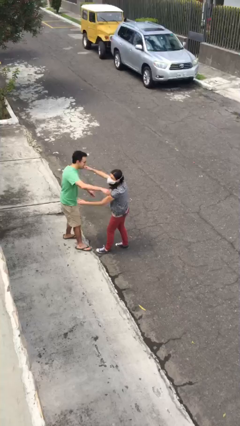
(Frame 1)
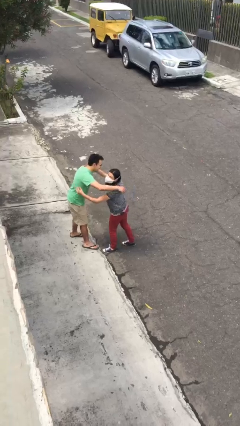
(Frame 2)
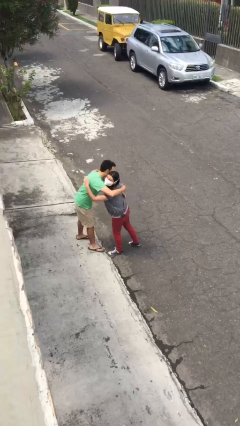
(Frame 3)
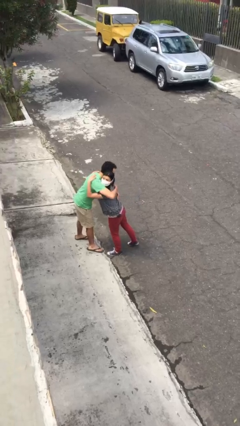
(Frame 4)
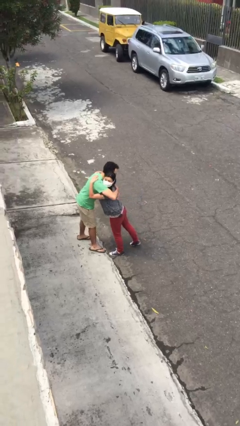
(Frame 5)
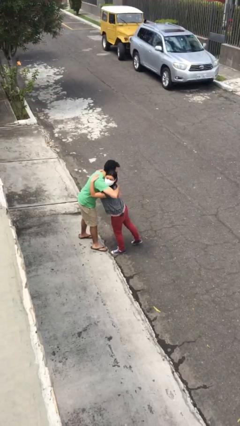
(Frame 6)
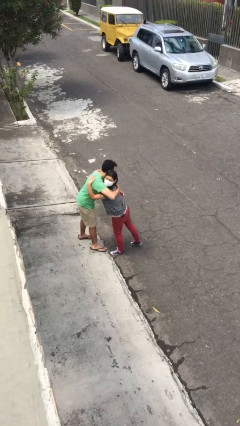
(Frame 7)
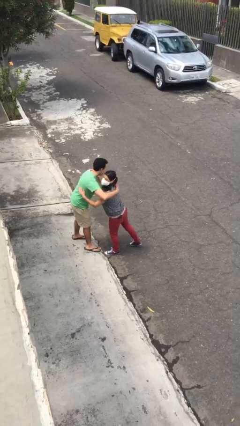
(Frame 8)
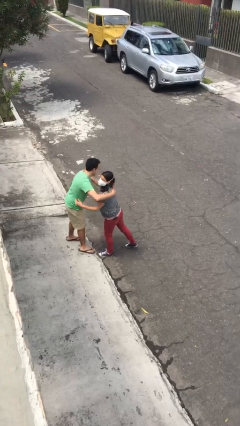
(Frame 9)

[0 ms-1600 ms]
person embraces person

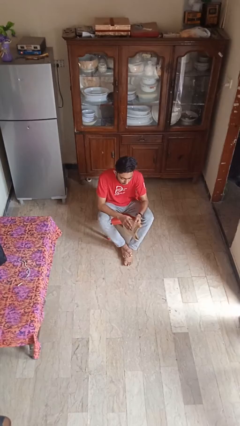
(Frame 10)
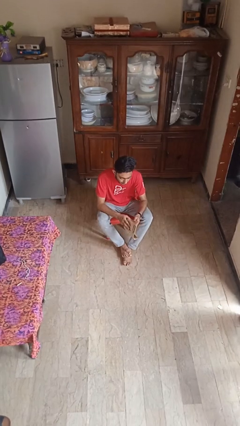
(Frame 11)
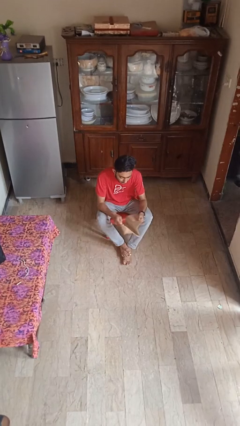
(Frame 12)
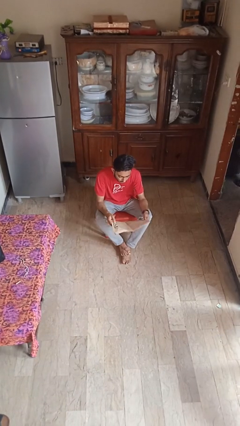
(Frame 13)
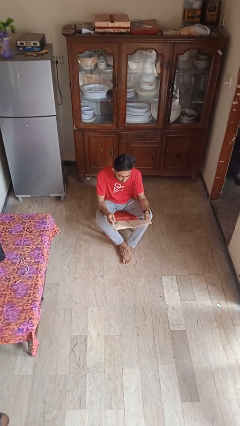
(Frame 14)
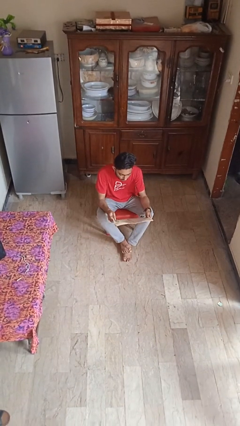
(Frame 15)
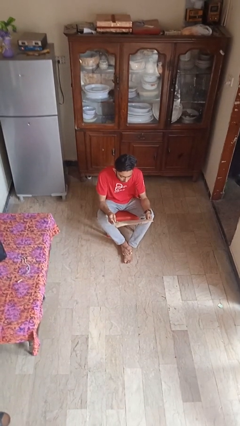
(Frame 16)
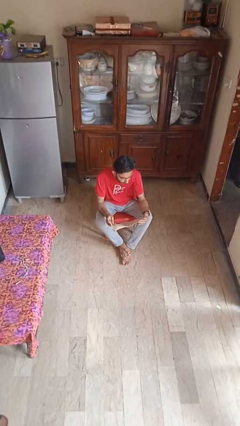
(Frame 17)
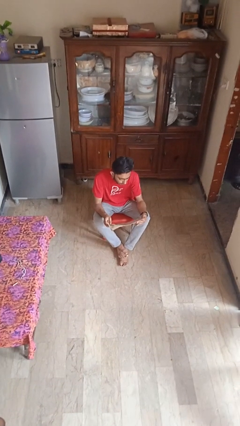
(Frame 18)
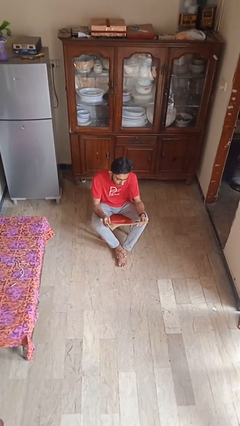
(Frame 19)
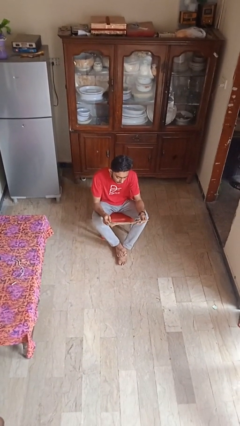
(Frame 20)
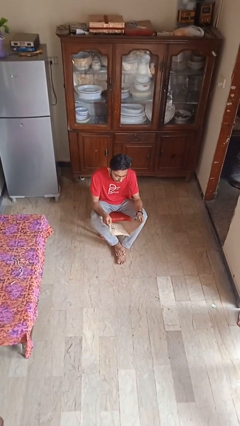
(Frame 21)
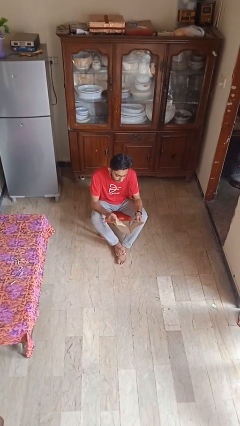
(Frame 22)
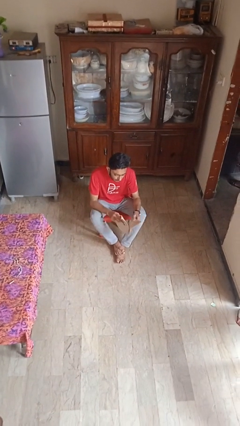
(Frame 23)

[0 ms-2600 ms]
person reads newspaper

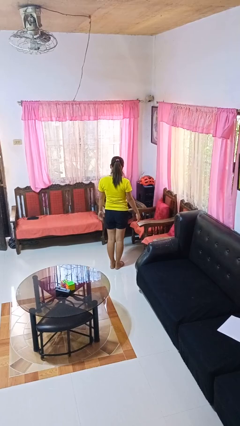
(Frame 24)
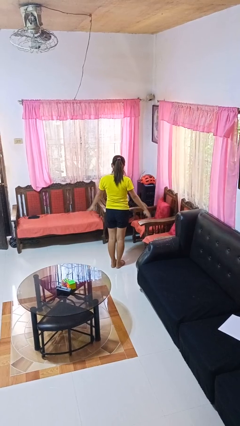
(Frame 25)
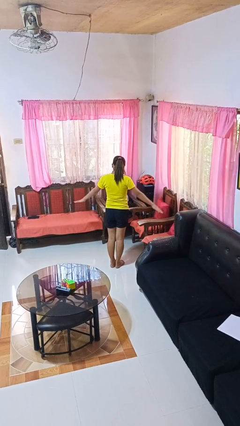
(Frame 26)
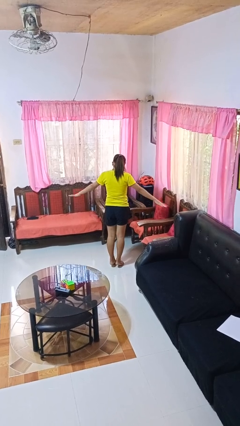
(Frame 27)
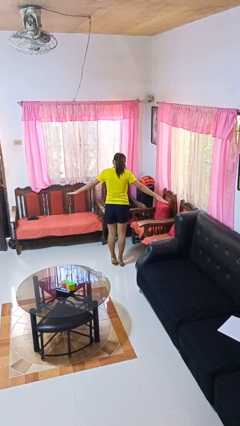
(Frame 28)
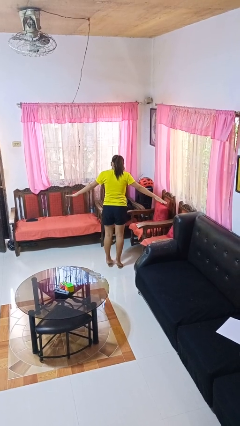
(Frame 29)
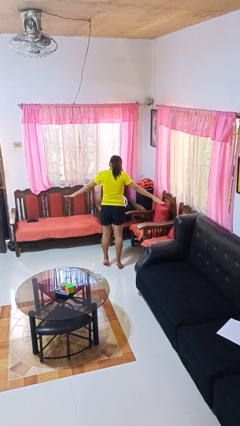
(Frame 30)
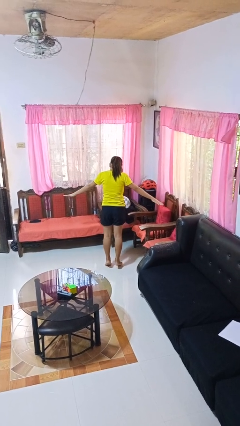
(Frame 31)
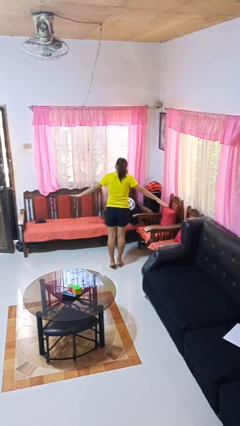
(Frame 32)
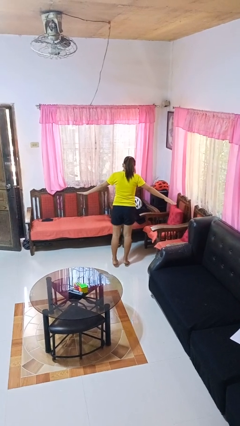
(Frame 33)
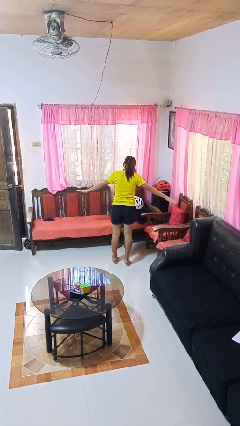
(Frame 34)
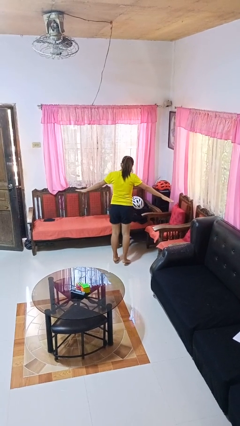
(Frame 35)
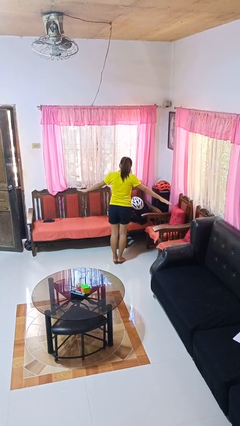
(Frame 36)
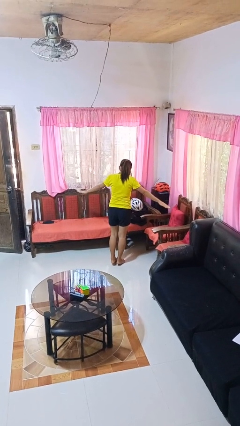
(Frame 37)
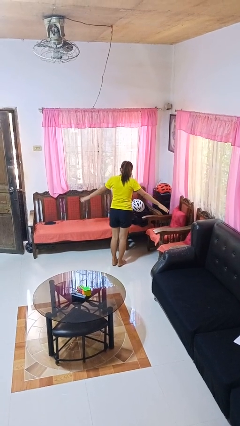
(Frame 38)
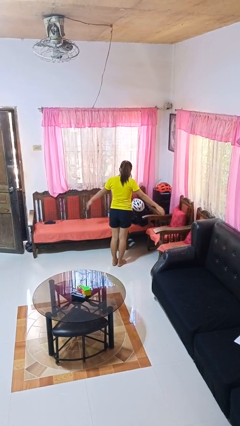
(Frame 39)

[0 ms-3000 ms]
person walks tiptoe

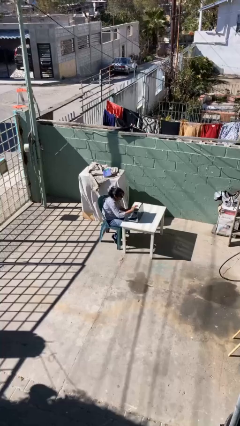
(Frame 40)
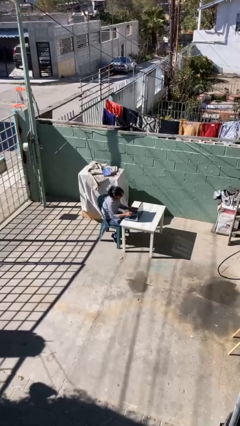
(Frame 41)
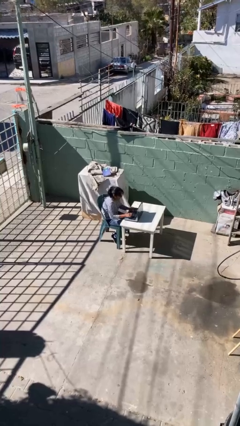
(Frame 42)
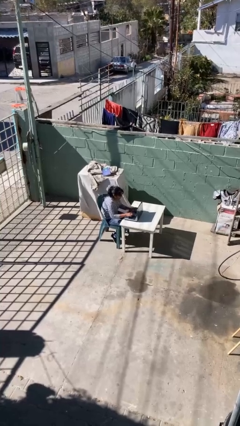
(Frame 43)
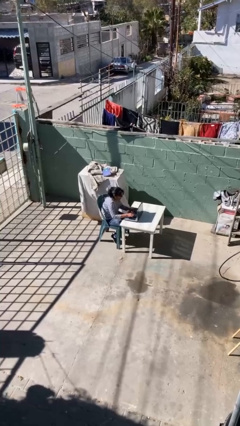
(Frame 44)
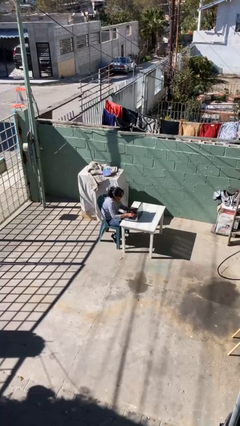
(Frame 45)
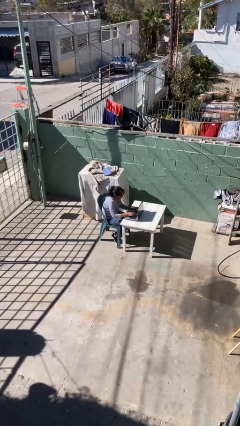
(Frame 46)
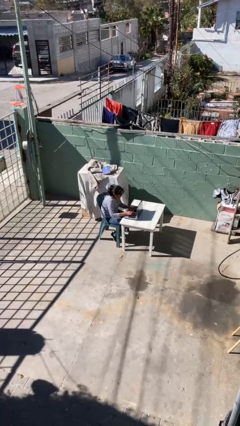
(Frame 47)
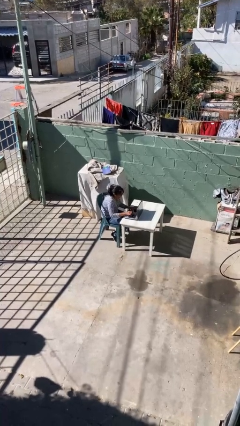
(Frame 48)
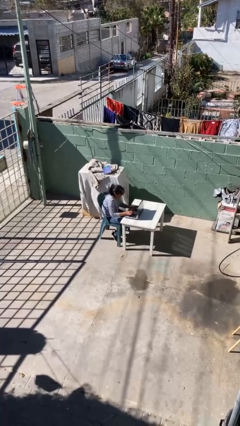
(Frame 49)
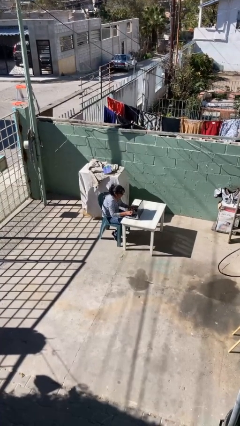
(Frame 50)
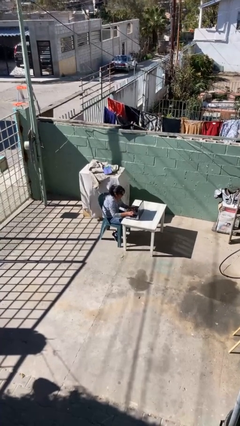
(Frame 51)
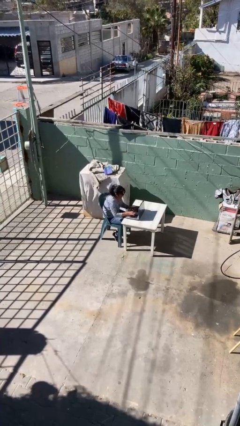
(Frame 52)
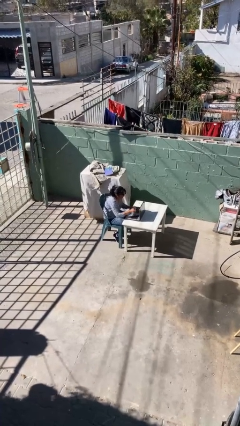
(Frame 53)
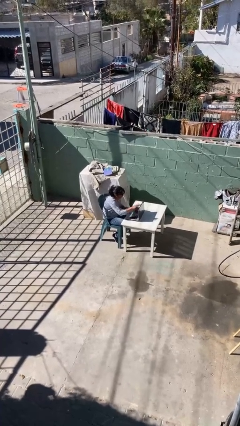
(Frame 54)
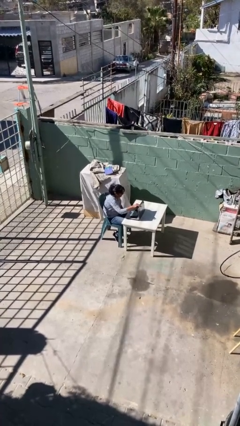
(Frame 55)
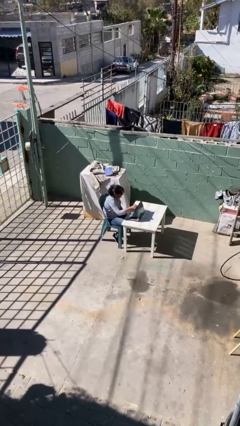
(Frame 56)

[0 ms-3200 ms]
person interacts with laptop

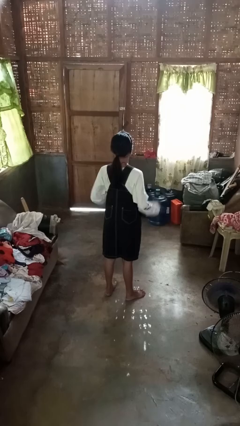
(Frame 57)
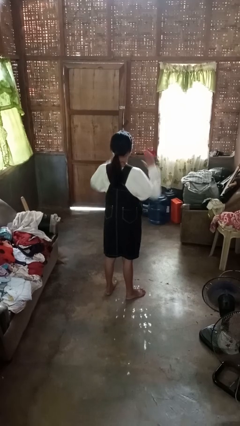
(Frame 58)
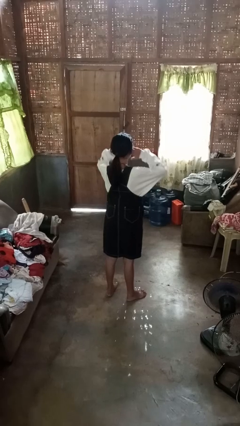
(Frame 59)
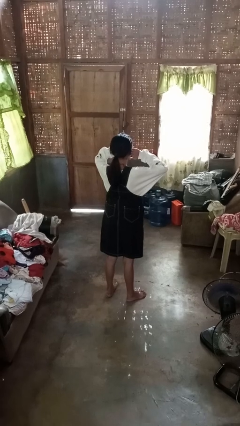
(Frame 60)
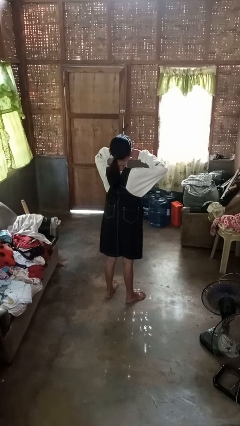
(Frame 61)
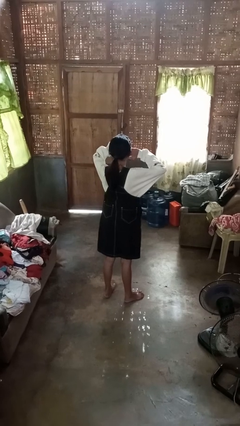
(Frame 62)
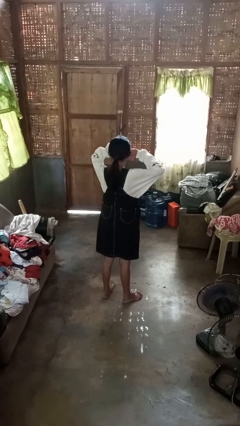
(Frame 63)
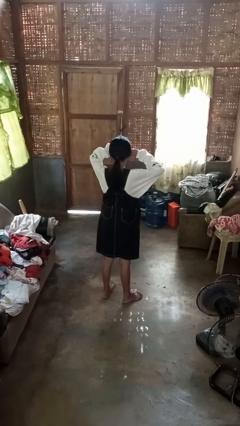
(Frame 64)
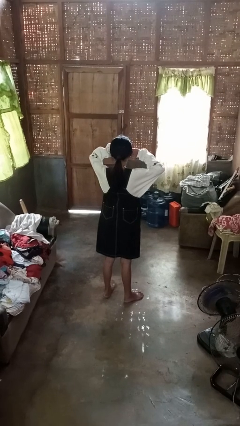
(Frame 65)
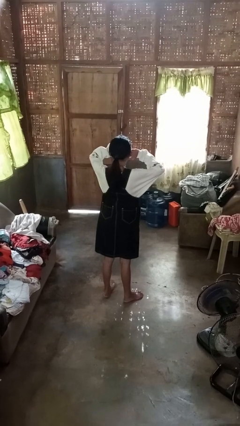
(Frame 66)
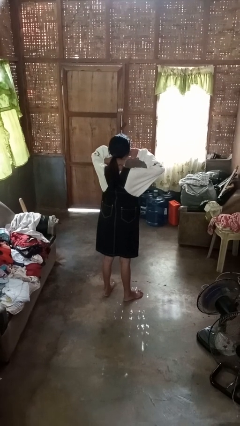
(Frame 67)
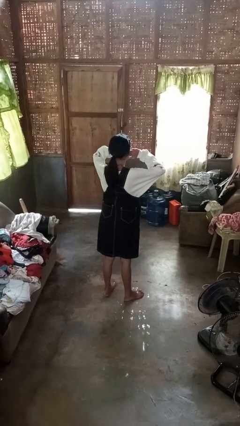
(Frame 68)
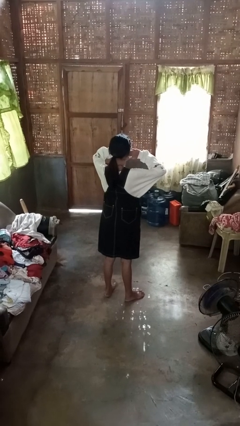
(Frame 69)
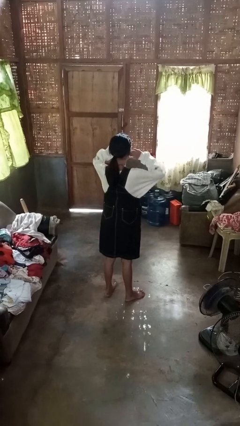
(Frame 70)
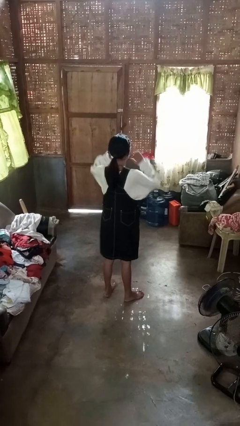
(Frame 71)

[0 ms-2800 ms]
person puts fingers in ear

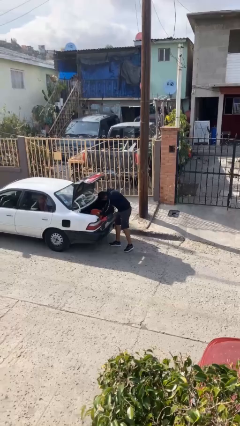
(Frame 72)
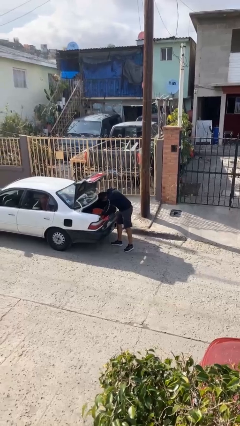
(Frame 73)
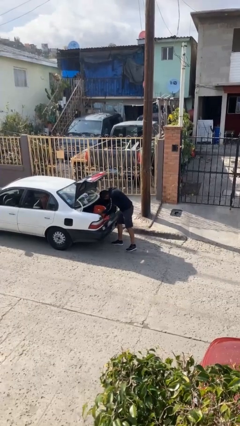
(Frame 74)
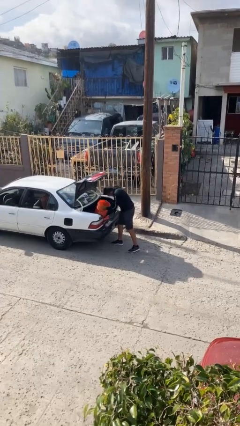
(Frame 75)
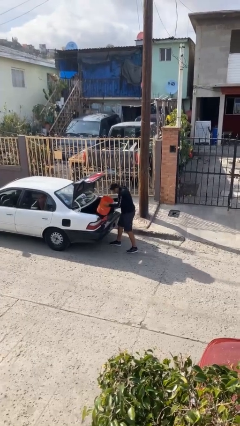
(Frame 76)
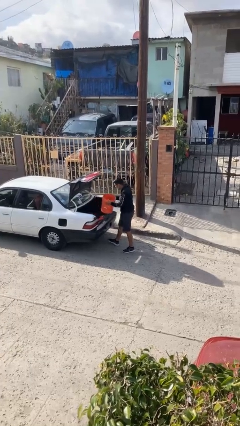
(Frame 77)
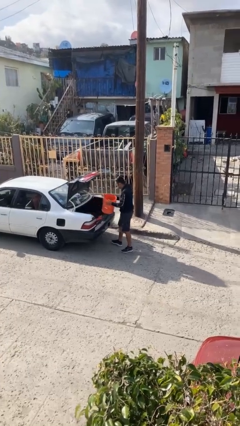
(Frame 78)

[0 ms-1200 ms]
person unloads car

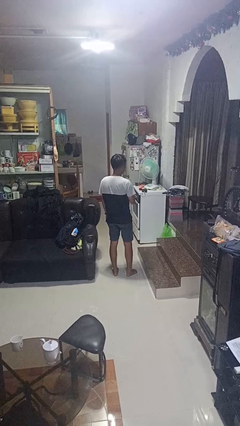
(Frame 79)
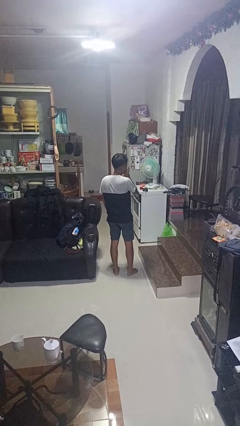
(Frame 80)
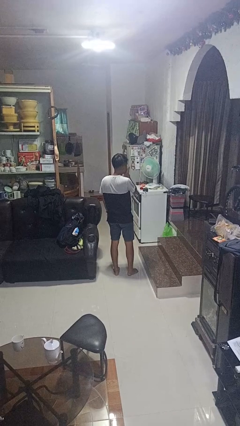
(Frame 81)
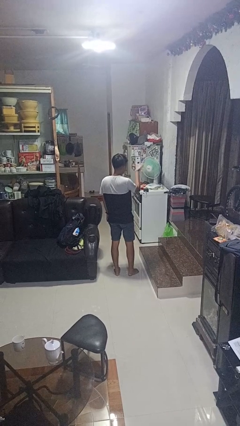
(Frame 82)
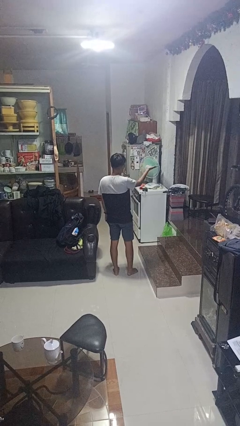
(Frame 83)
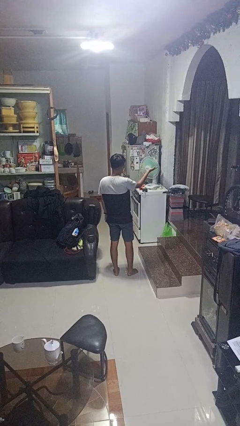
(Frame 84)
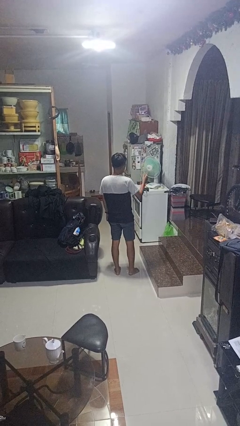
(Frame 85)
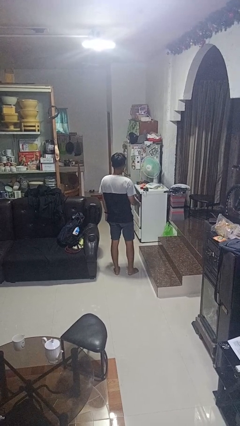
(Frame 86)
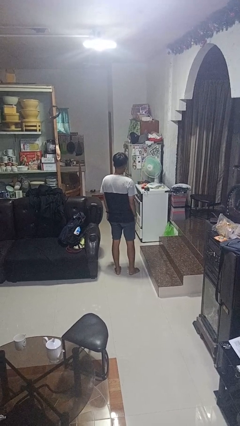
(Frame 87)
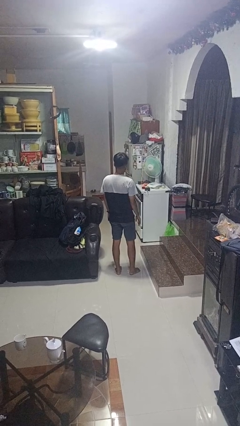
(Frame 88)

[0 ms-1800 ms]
person gestures blow kiss

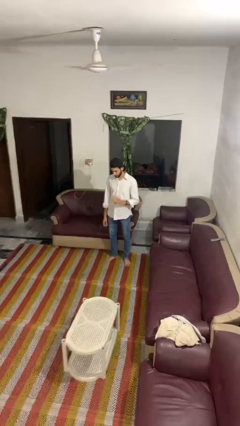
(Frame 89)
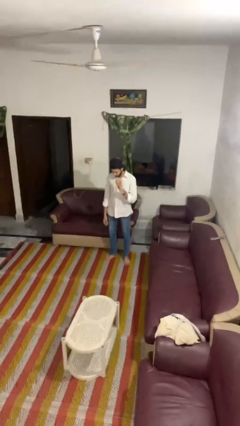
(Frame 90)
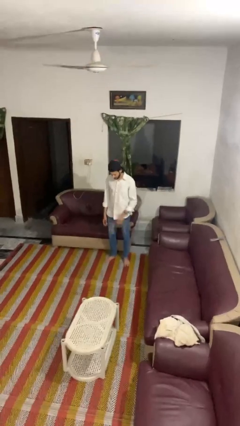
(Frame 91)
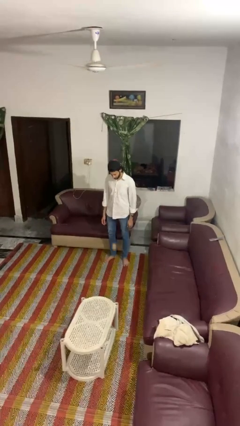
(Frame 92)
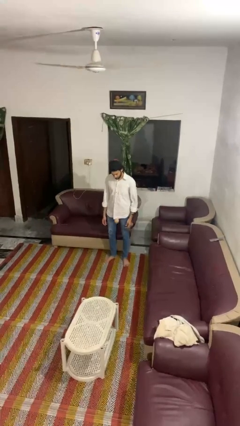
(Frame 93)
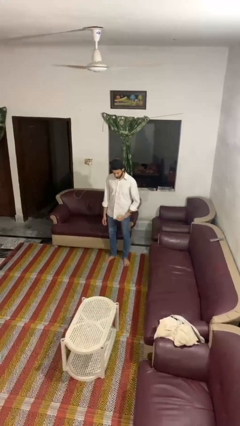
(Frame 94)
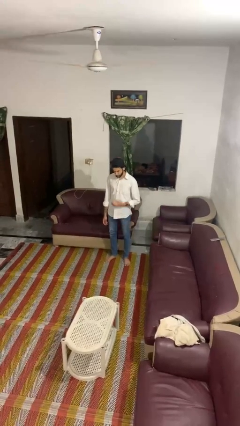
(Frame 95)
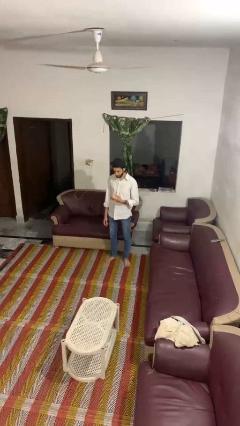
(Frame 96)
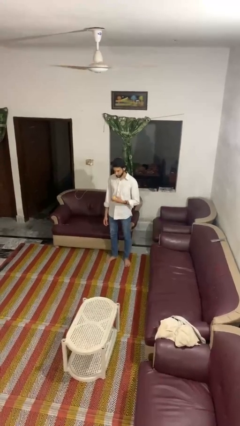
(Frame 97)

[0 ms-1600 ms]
person bounces ball on floor
